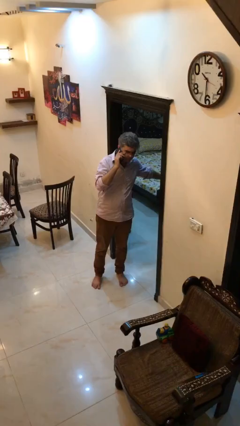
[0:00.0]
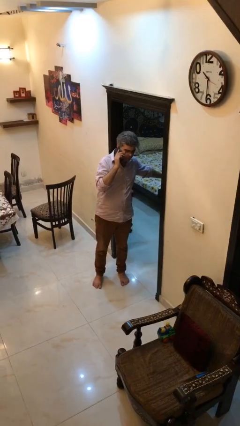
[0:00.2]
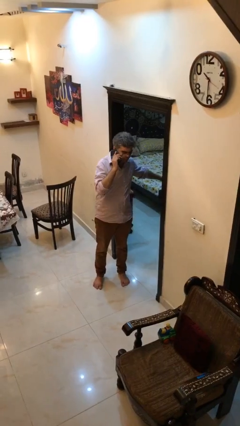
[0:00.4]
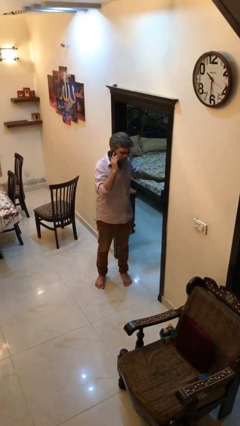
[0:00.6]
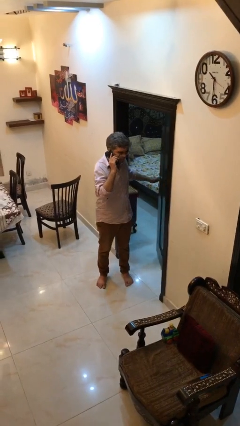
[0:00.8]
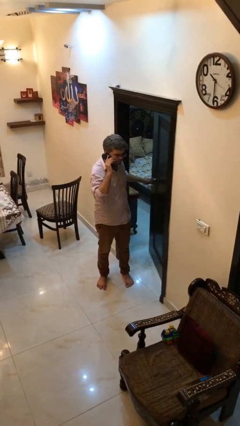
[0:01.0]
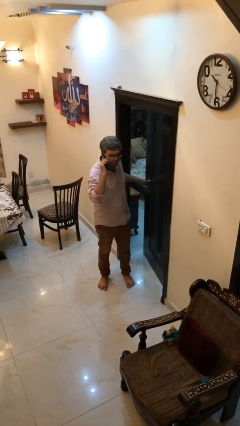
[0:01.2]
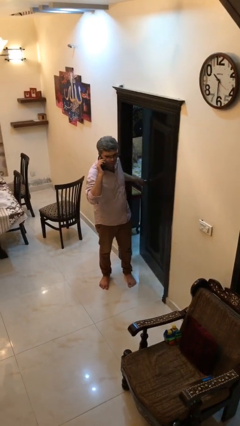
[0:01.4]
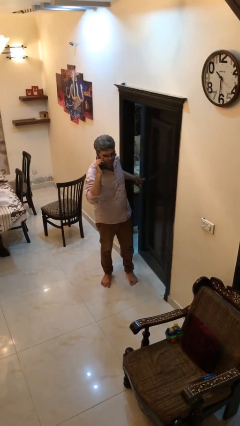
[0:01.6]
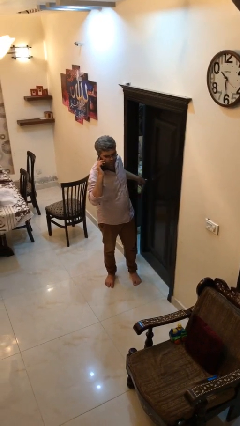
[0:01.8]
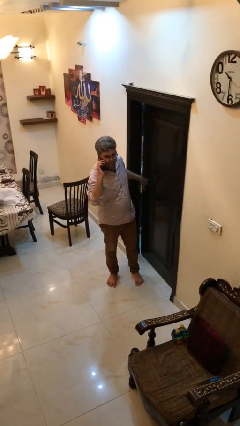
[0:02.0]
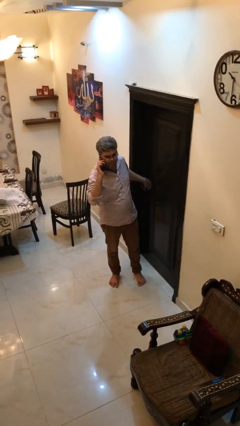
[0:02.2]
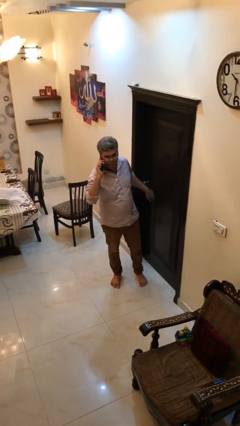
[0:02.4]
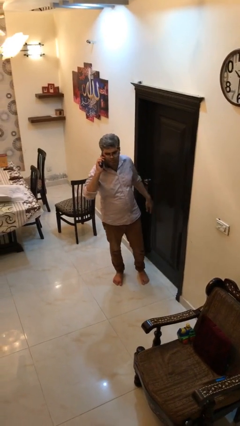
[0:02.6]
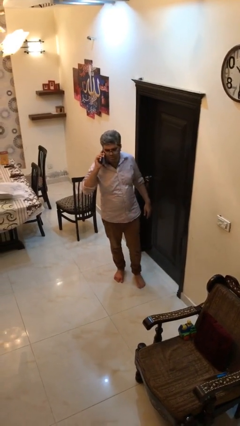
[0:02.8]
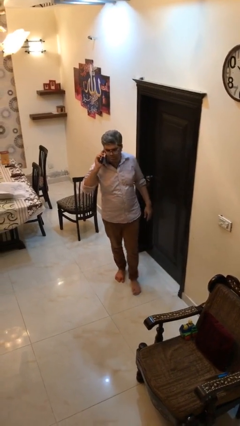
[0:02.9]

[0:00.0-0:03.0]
person closes facility door

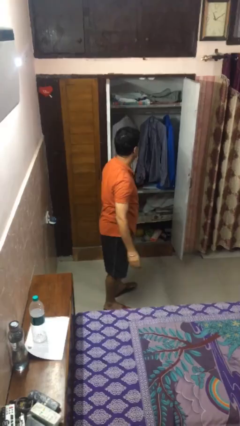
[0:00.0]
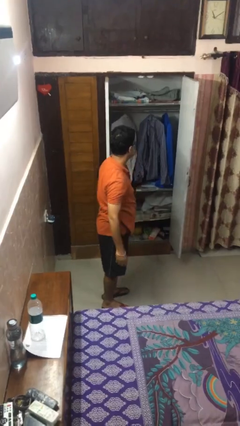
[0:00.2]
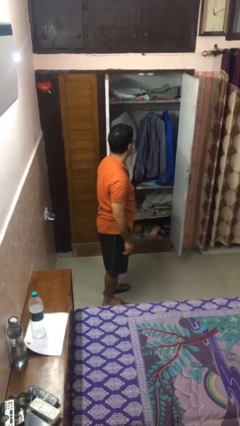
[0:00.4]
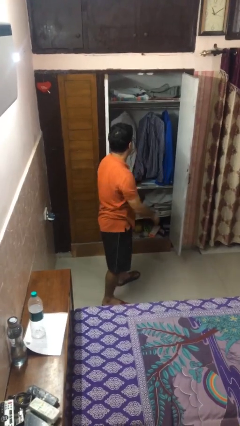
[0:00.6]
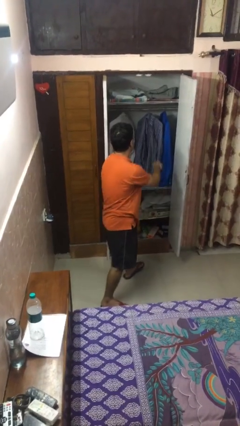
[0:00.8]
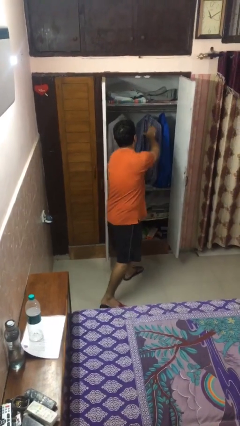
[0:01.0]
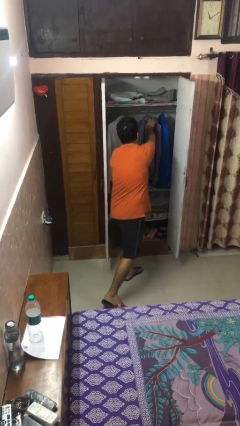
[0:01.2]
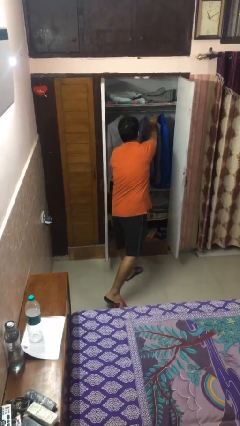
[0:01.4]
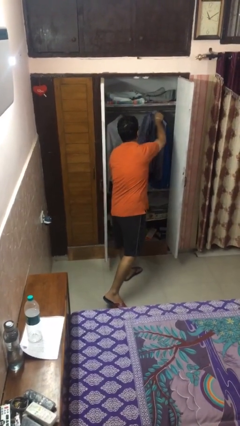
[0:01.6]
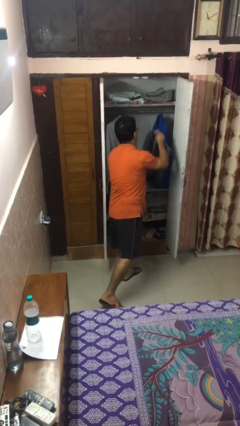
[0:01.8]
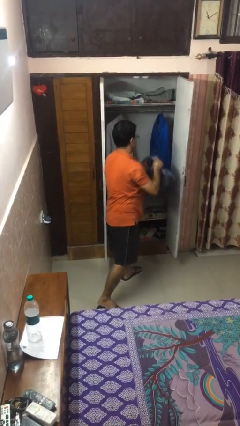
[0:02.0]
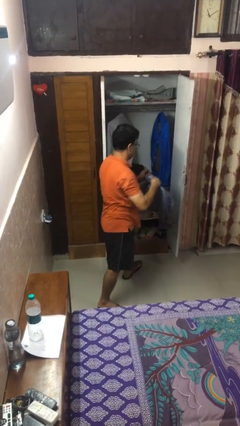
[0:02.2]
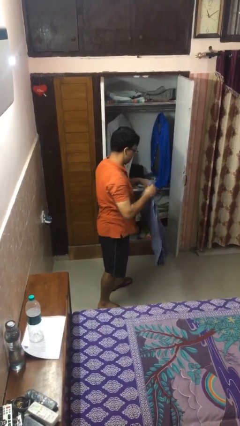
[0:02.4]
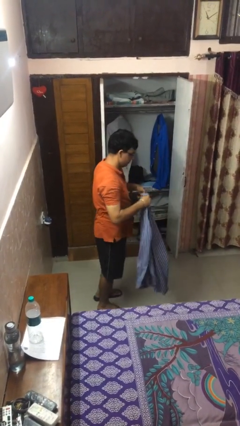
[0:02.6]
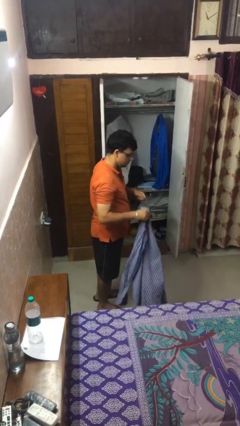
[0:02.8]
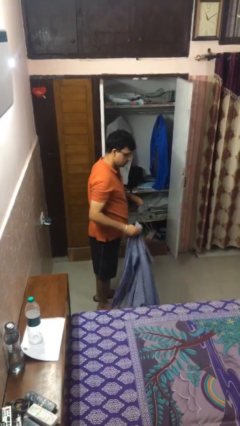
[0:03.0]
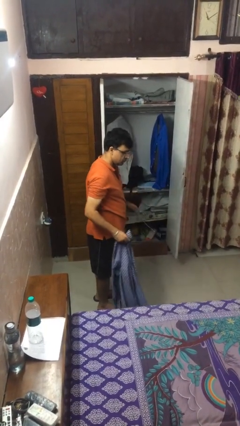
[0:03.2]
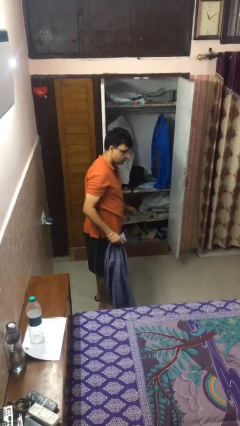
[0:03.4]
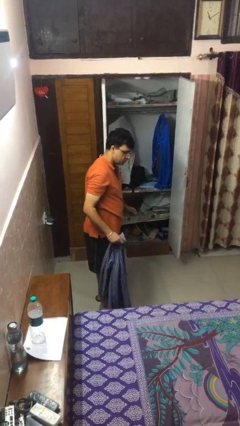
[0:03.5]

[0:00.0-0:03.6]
person takes clothes from closet

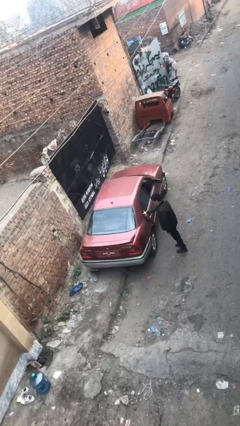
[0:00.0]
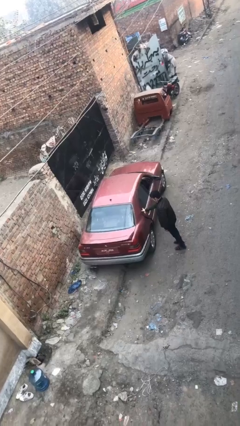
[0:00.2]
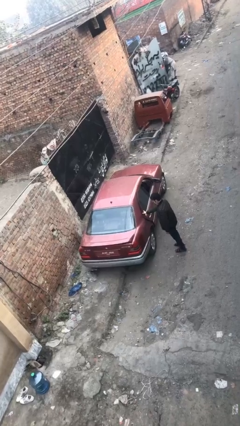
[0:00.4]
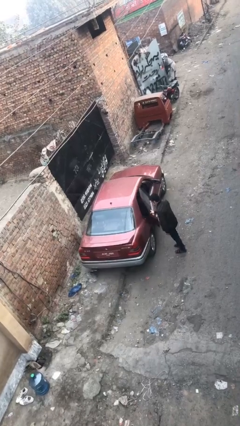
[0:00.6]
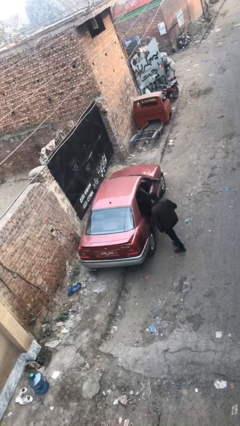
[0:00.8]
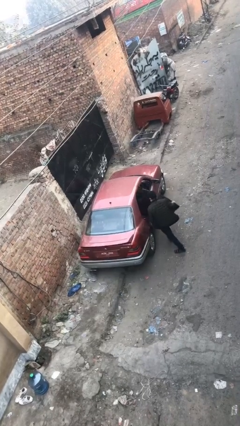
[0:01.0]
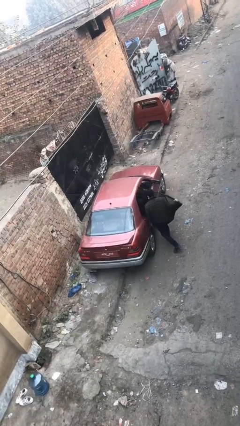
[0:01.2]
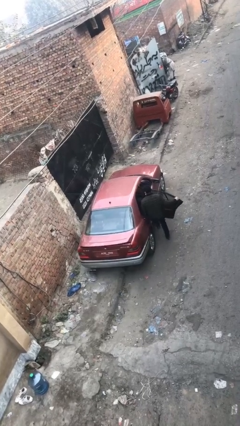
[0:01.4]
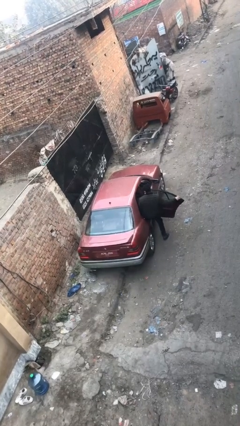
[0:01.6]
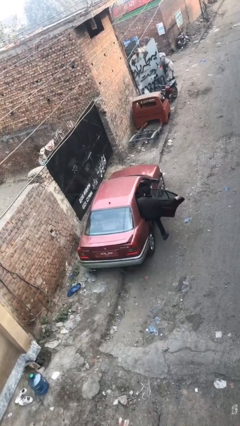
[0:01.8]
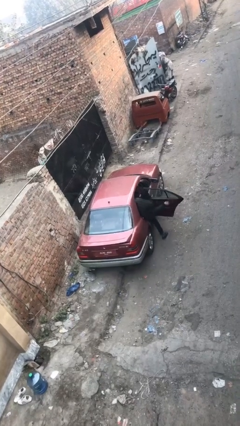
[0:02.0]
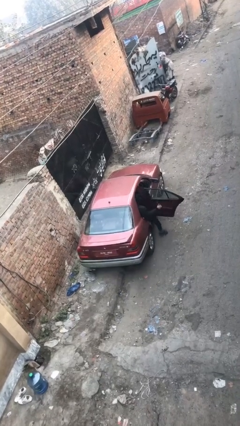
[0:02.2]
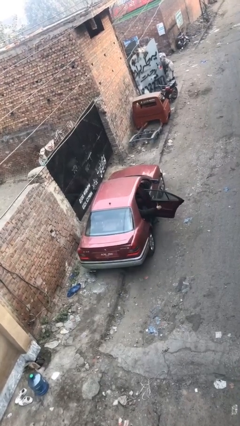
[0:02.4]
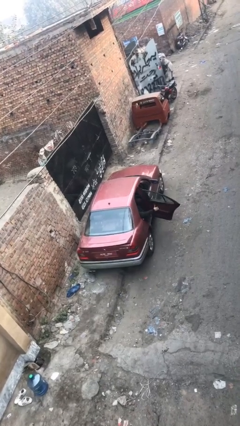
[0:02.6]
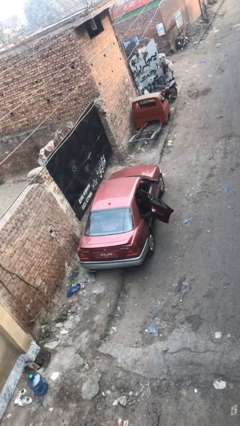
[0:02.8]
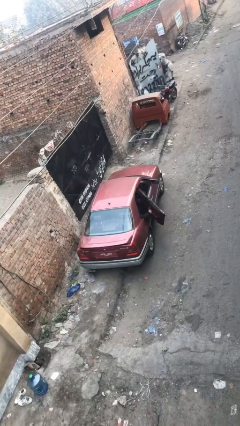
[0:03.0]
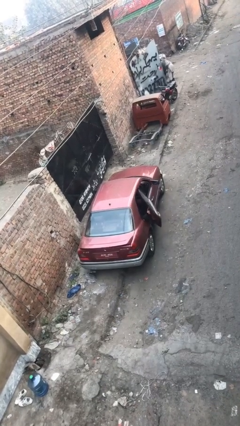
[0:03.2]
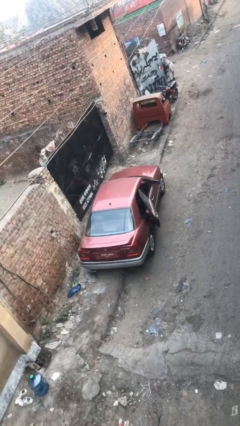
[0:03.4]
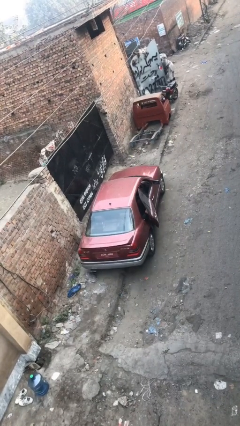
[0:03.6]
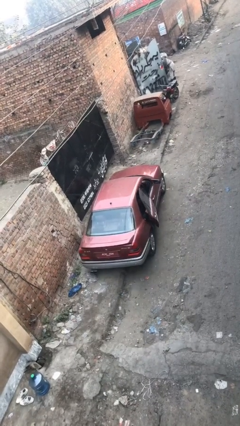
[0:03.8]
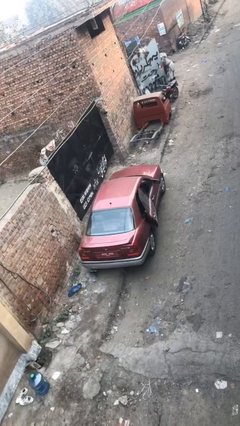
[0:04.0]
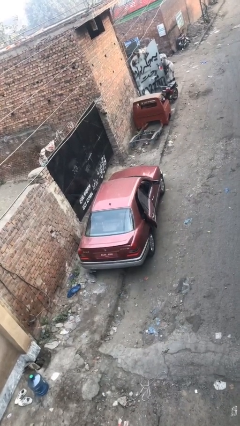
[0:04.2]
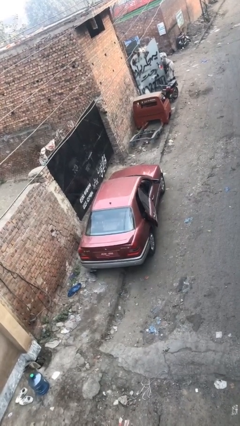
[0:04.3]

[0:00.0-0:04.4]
car picks up person

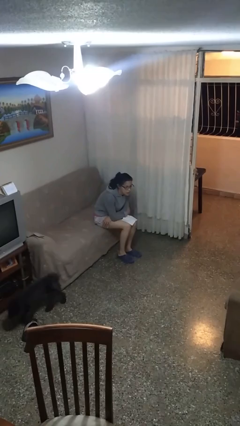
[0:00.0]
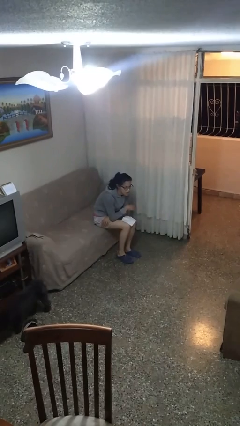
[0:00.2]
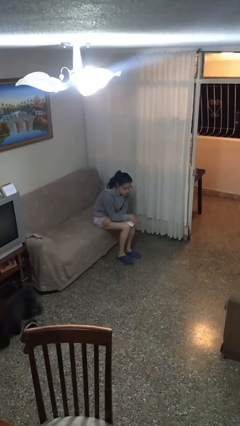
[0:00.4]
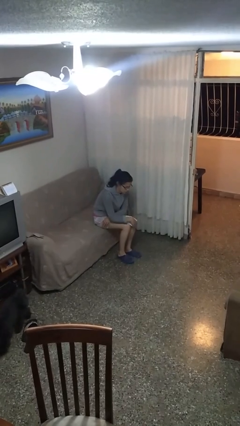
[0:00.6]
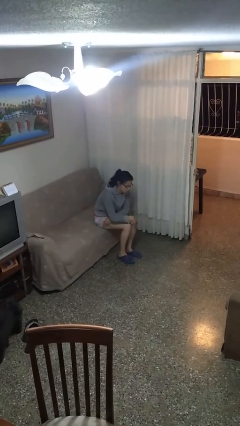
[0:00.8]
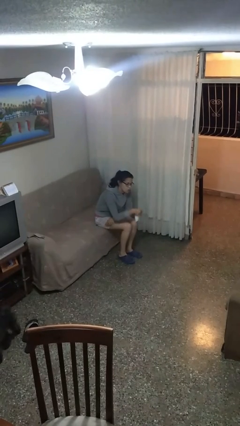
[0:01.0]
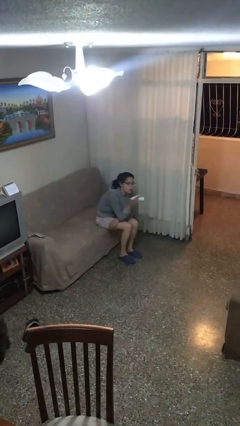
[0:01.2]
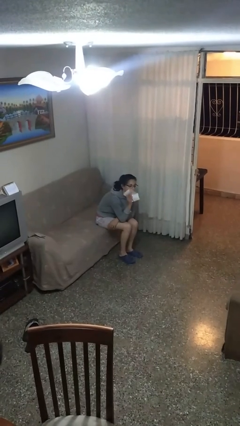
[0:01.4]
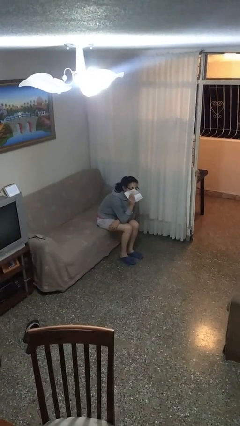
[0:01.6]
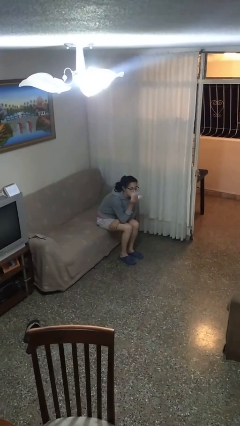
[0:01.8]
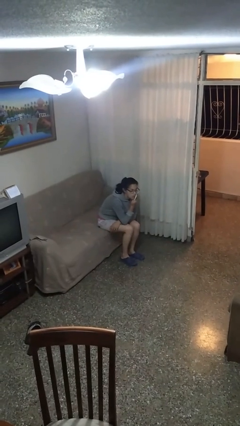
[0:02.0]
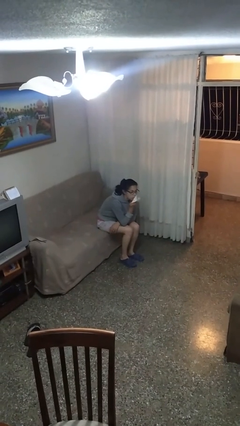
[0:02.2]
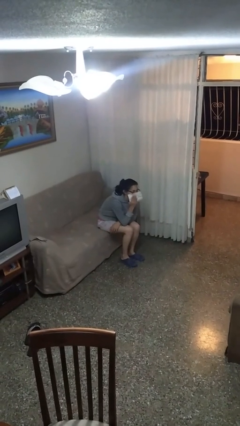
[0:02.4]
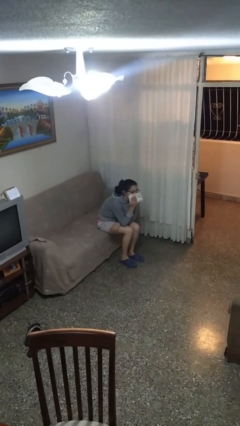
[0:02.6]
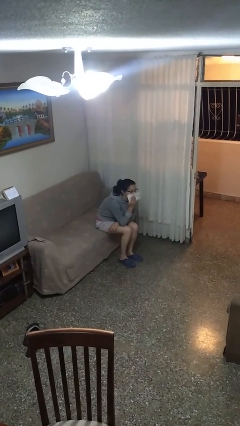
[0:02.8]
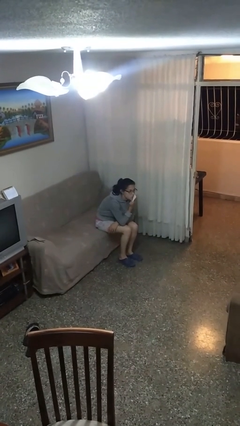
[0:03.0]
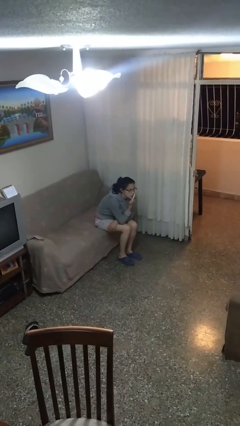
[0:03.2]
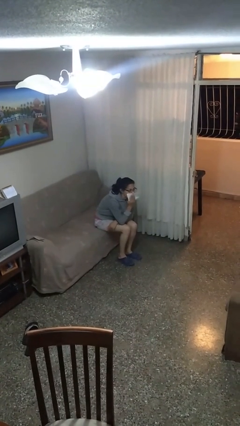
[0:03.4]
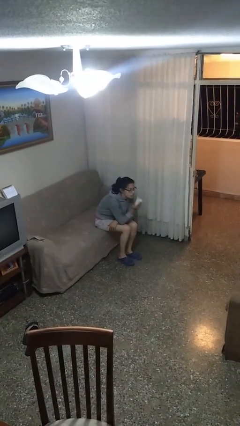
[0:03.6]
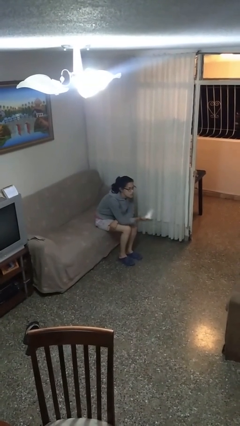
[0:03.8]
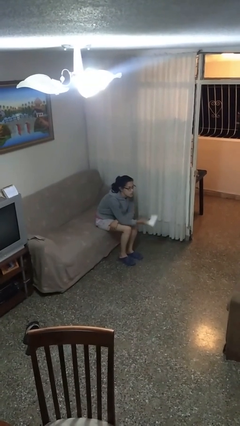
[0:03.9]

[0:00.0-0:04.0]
person wipes mouth with napkin

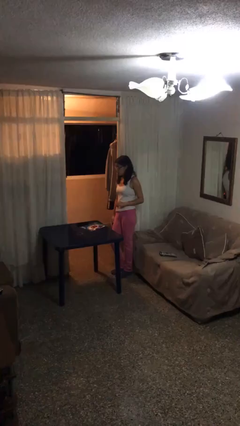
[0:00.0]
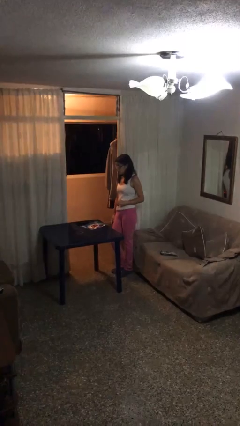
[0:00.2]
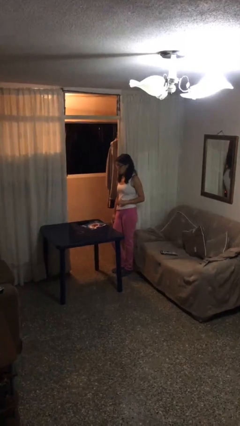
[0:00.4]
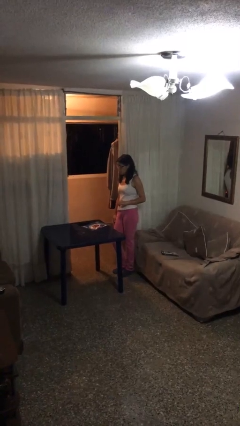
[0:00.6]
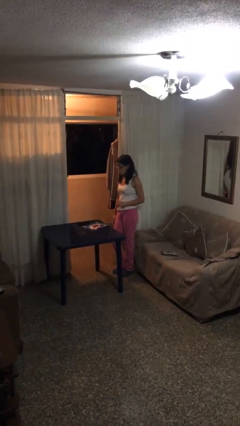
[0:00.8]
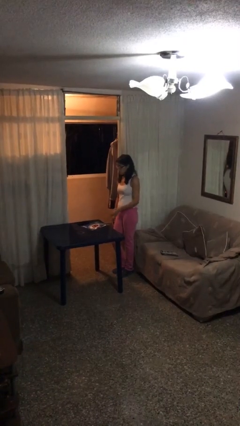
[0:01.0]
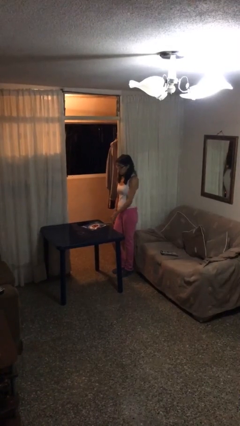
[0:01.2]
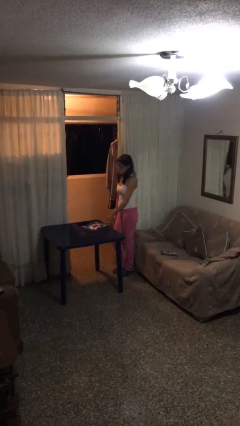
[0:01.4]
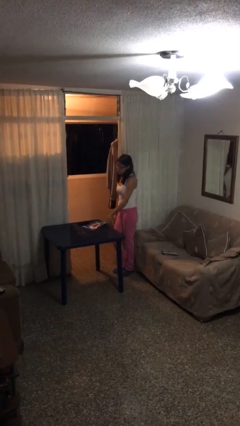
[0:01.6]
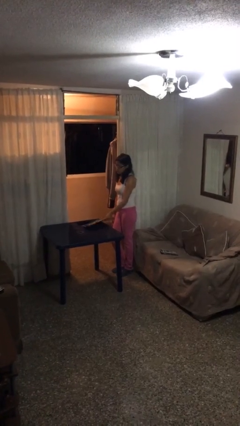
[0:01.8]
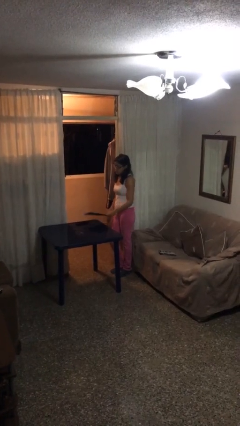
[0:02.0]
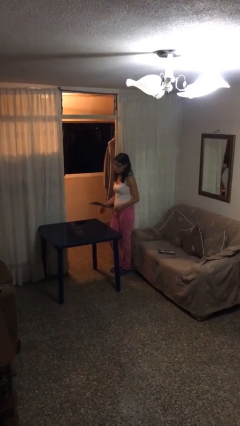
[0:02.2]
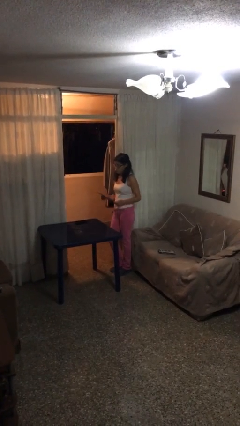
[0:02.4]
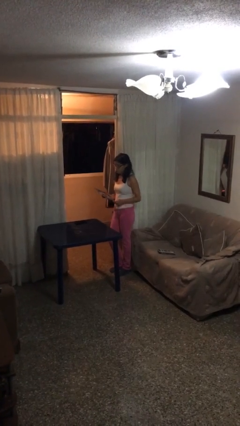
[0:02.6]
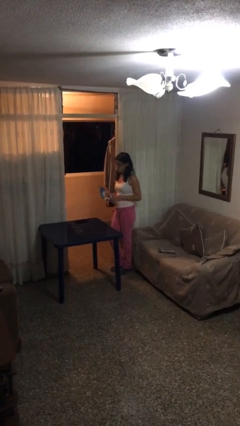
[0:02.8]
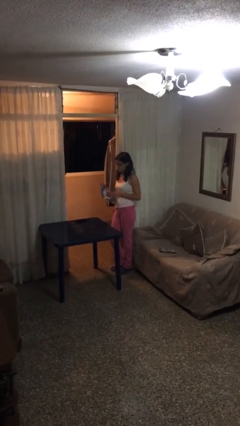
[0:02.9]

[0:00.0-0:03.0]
person picks up object from table
